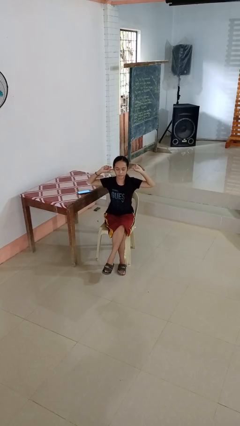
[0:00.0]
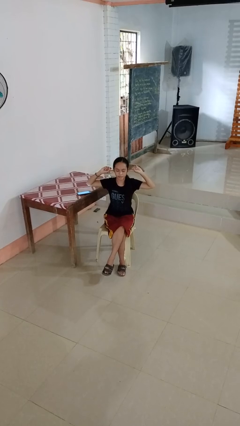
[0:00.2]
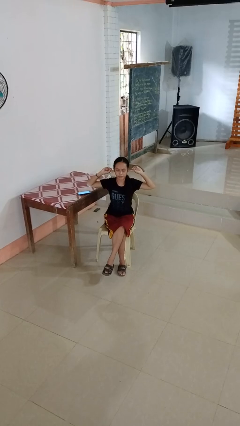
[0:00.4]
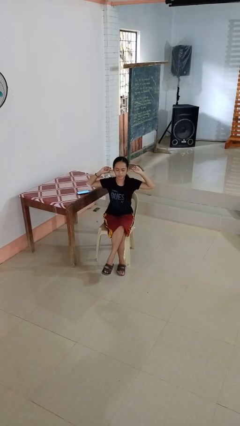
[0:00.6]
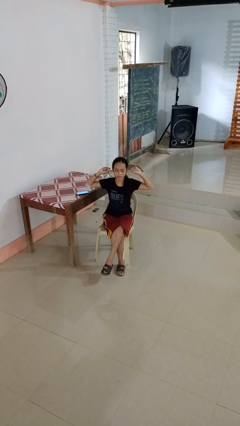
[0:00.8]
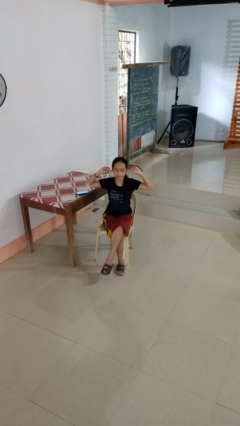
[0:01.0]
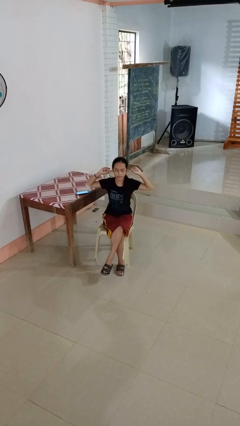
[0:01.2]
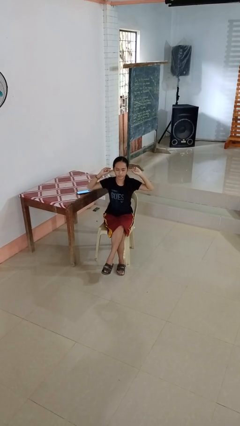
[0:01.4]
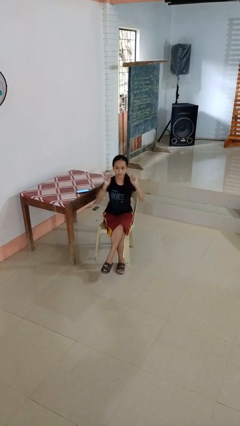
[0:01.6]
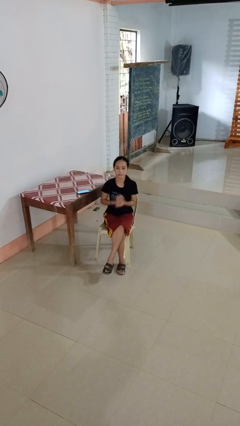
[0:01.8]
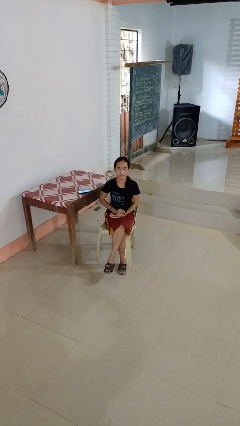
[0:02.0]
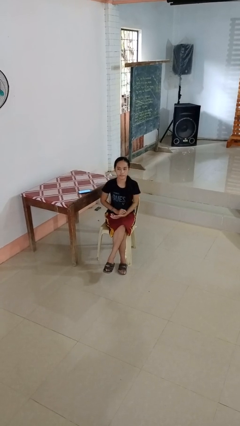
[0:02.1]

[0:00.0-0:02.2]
person puts fingers in ear

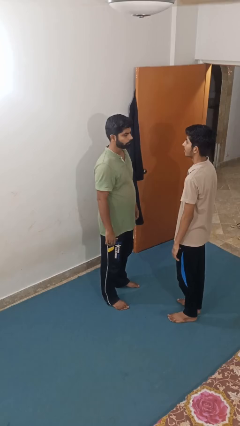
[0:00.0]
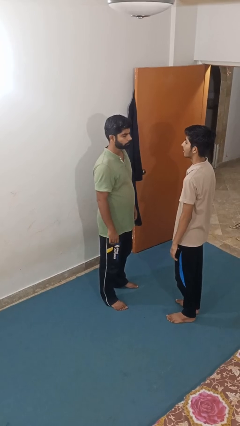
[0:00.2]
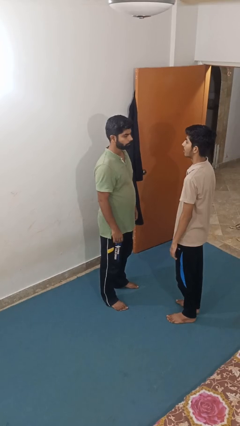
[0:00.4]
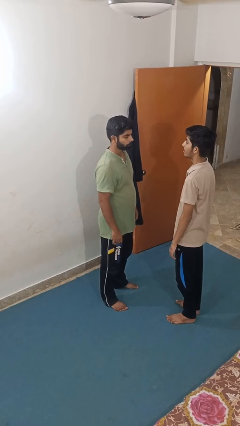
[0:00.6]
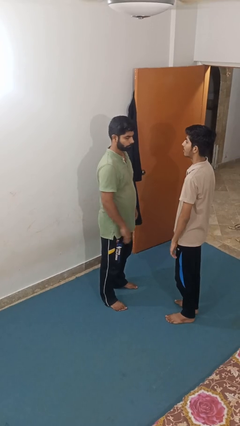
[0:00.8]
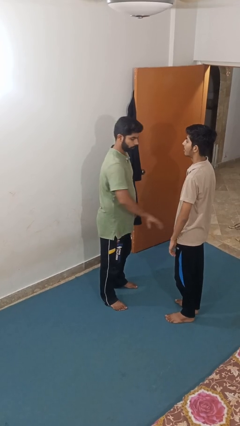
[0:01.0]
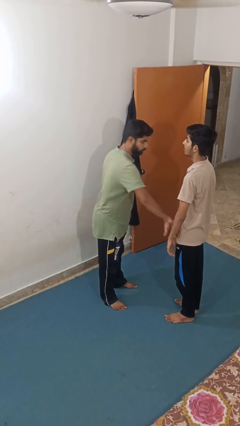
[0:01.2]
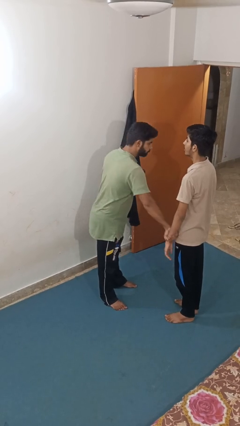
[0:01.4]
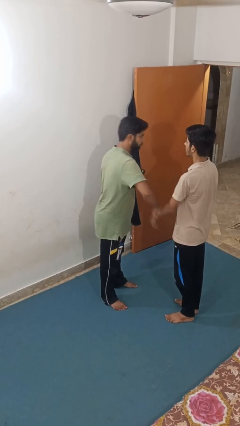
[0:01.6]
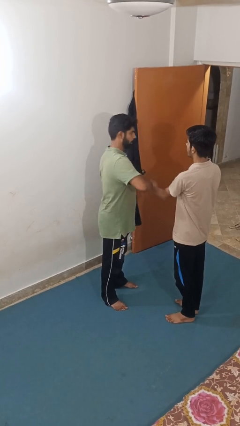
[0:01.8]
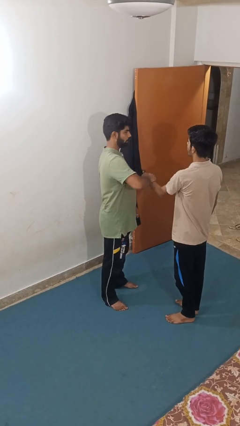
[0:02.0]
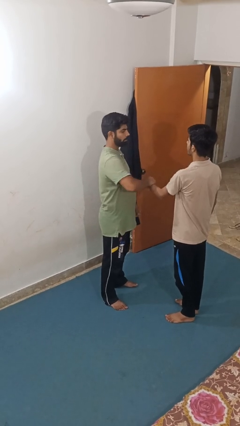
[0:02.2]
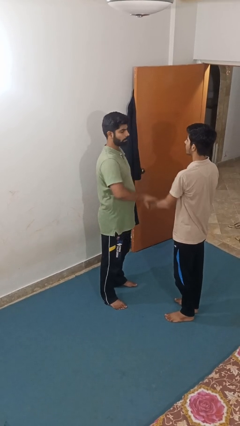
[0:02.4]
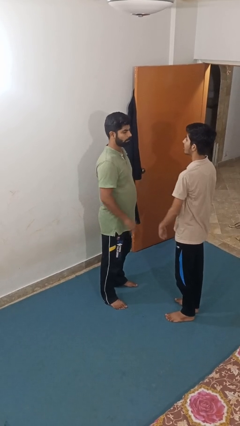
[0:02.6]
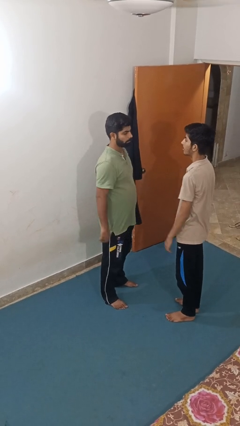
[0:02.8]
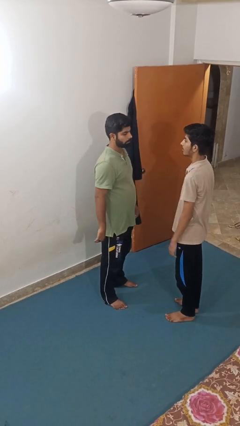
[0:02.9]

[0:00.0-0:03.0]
person grabs person by forearm

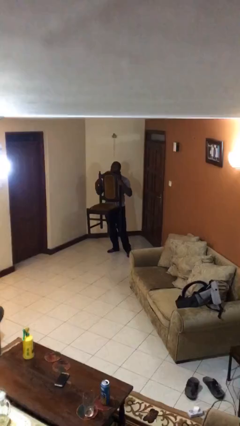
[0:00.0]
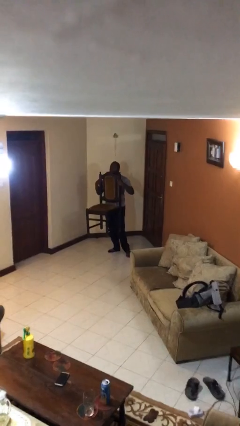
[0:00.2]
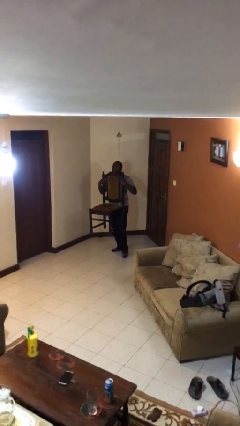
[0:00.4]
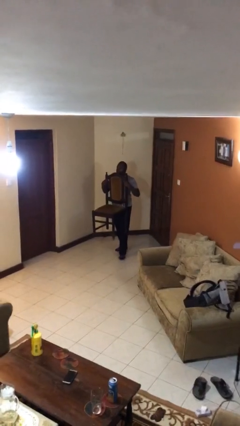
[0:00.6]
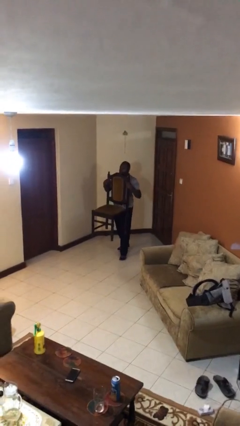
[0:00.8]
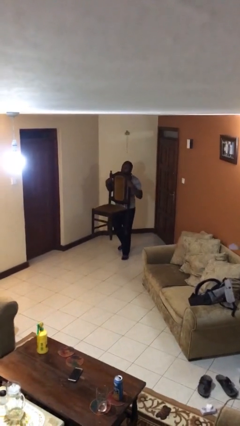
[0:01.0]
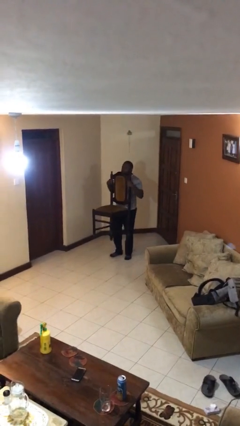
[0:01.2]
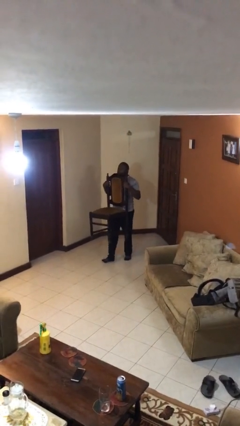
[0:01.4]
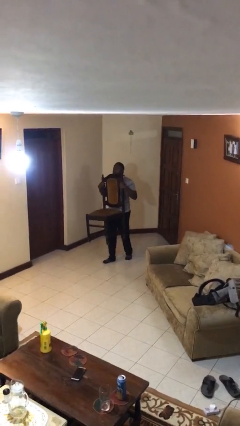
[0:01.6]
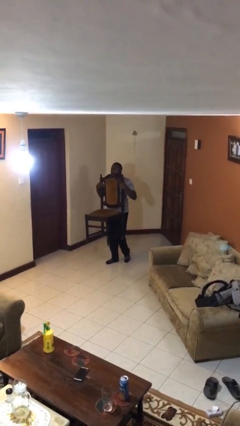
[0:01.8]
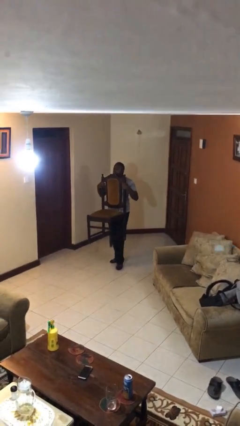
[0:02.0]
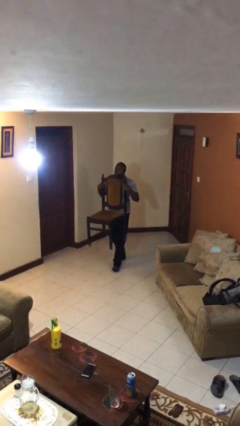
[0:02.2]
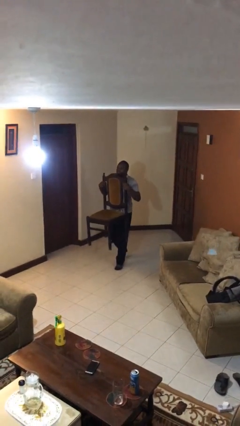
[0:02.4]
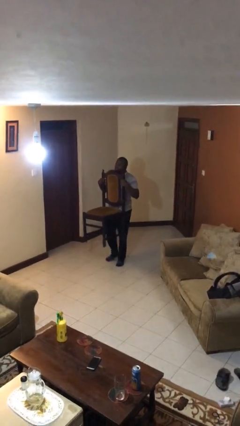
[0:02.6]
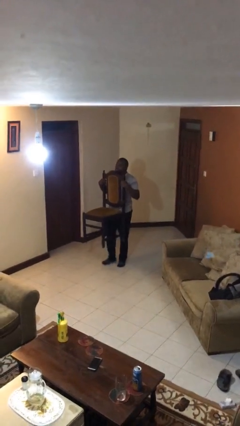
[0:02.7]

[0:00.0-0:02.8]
person carries heavy object

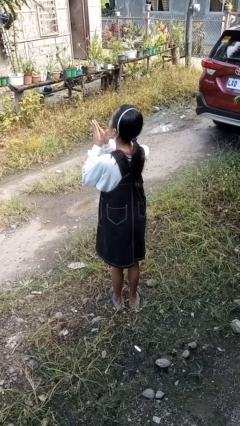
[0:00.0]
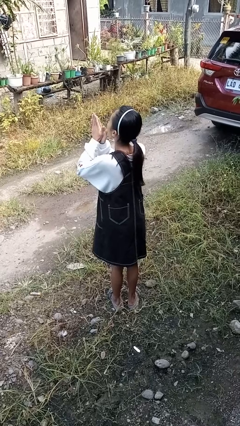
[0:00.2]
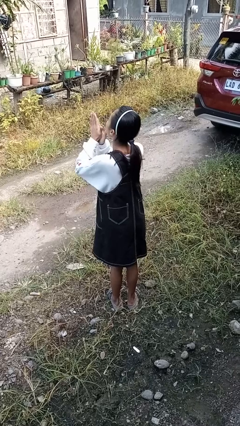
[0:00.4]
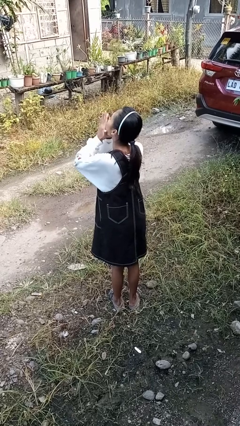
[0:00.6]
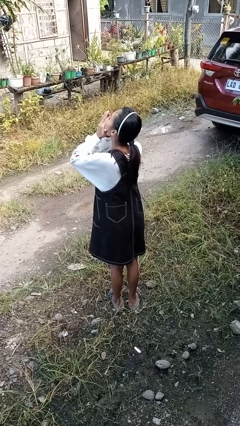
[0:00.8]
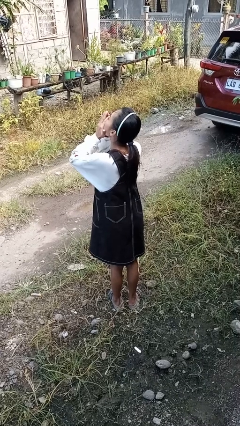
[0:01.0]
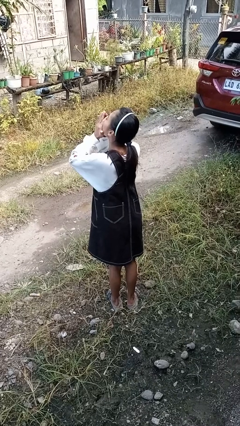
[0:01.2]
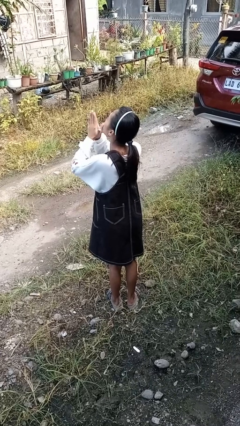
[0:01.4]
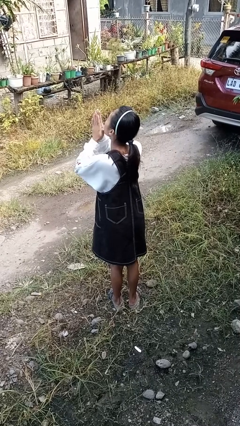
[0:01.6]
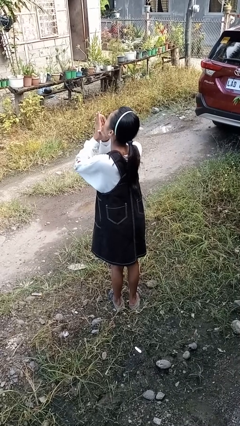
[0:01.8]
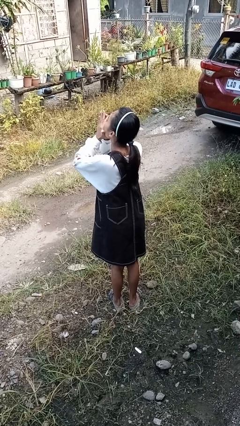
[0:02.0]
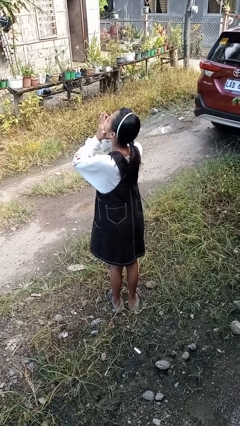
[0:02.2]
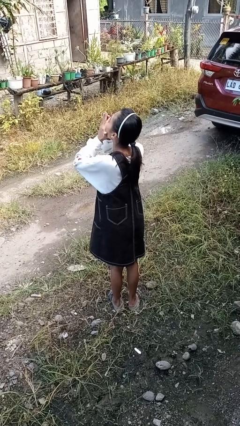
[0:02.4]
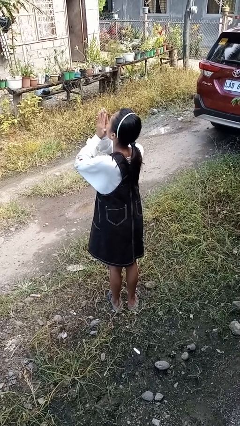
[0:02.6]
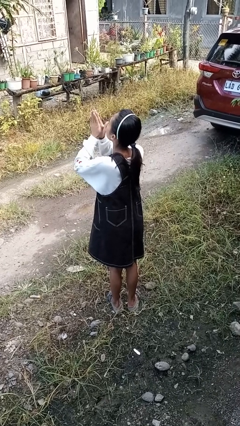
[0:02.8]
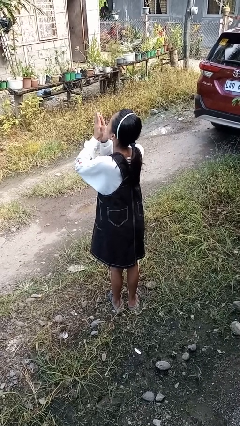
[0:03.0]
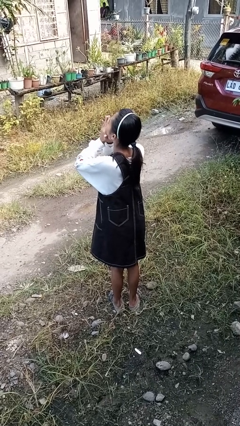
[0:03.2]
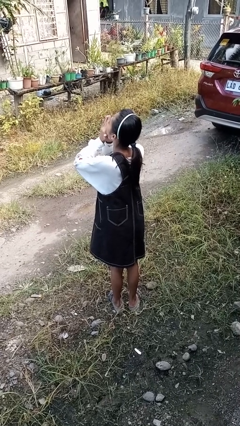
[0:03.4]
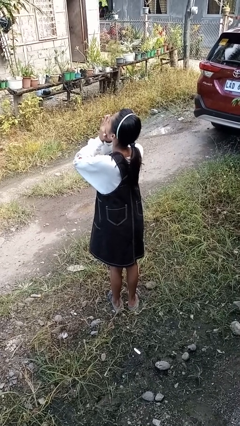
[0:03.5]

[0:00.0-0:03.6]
person blows into hands

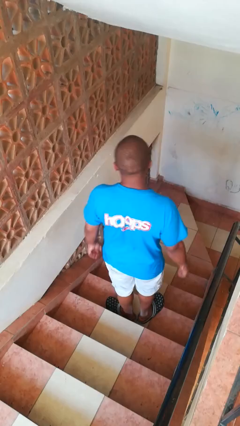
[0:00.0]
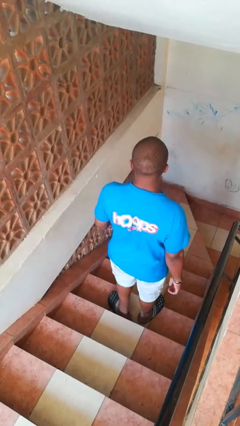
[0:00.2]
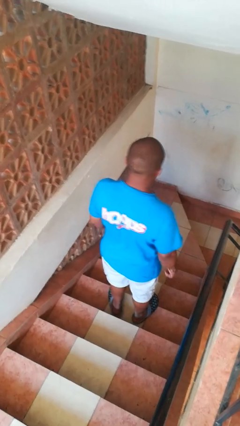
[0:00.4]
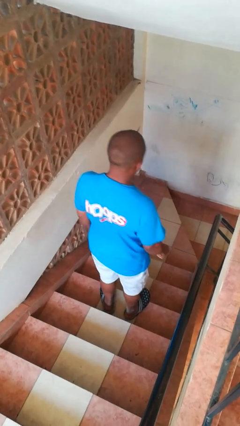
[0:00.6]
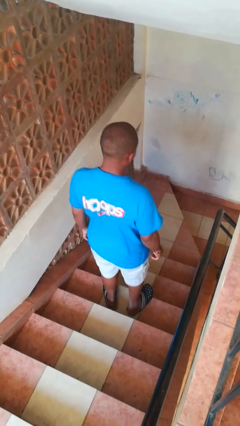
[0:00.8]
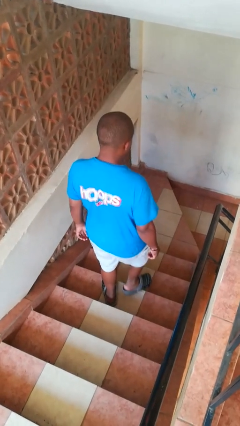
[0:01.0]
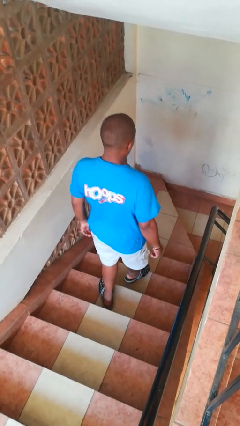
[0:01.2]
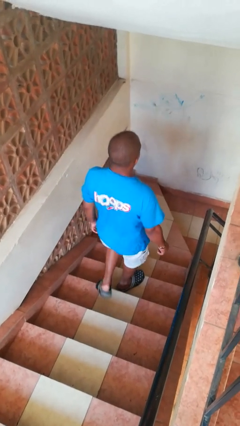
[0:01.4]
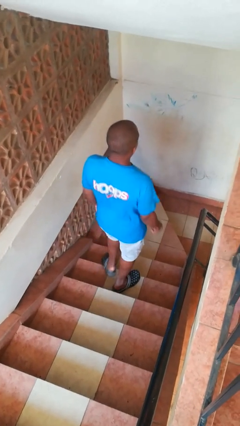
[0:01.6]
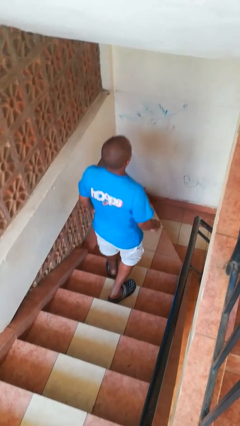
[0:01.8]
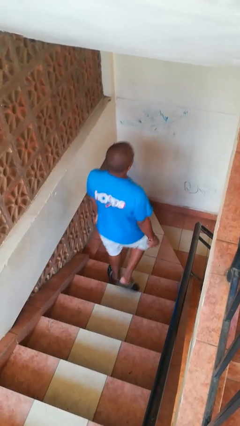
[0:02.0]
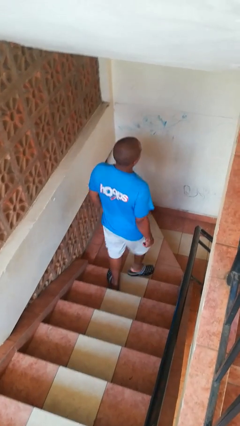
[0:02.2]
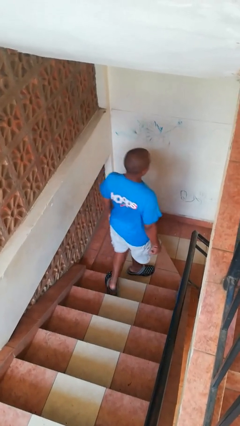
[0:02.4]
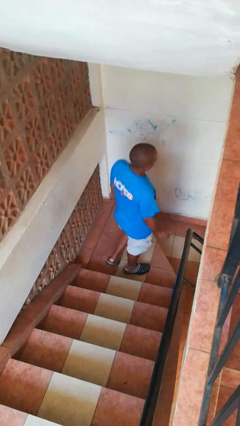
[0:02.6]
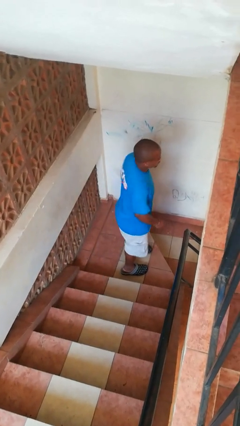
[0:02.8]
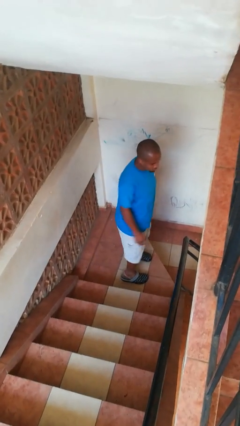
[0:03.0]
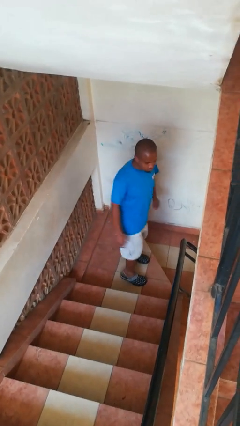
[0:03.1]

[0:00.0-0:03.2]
person climbs down stairs

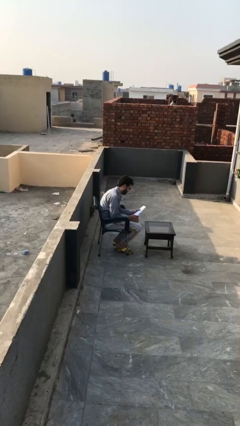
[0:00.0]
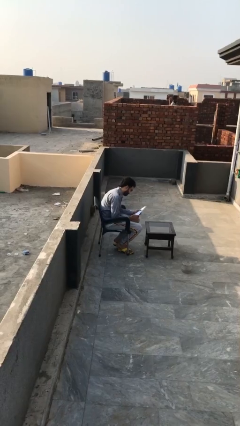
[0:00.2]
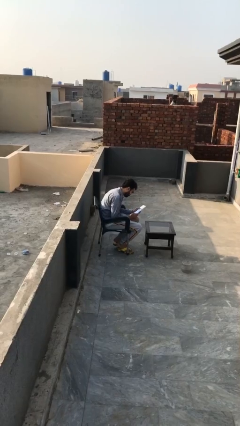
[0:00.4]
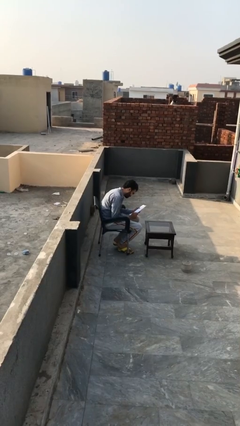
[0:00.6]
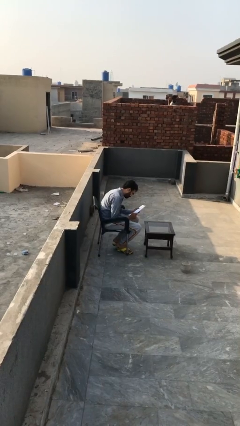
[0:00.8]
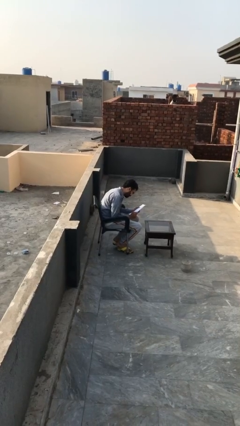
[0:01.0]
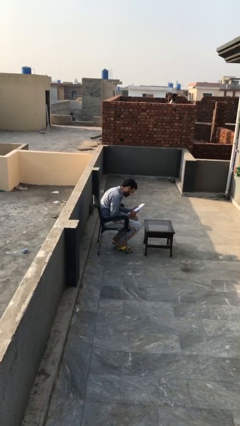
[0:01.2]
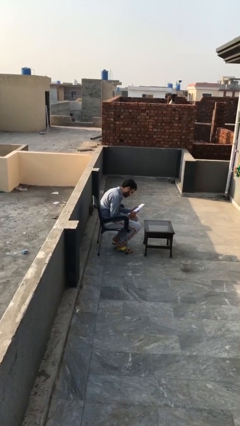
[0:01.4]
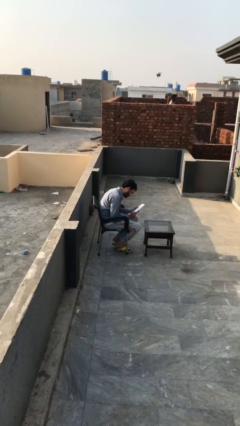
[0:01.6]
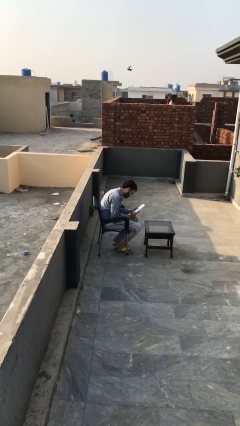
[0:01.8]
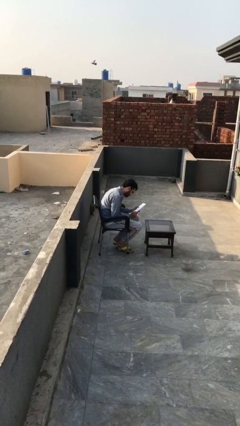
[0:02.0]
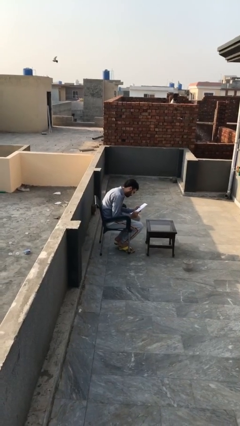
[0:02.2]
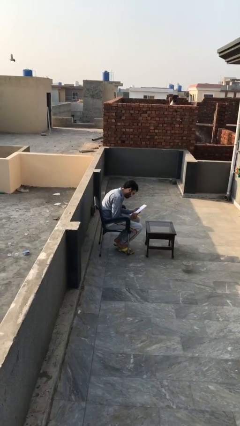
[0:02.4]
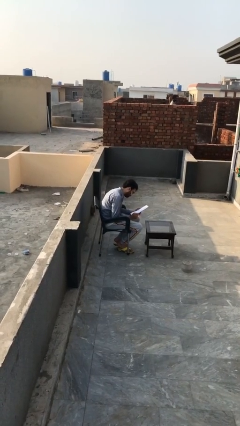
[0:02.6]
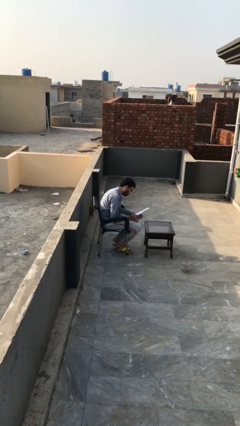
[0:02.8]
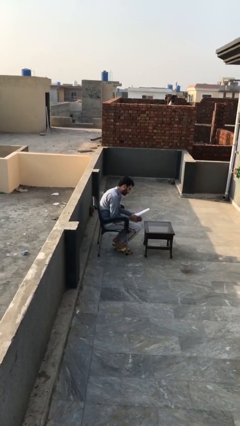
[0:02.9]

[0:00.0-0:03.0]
person reads document
